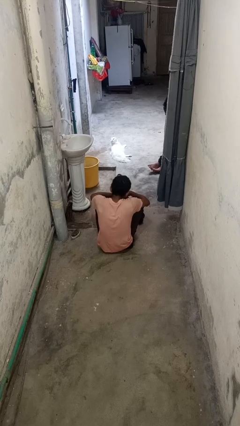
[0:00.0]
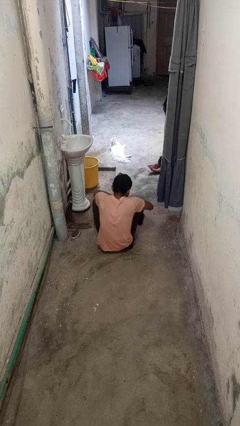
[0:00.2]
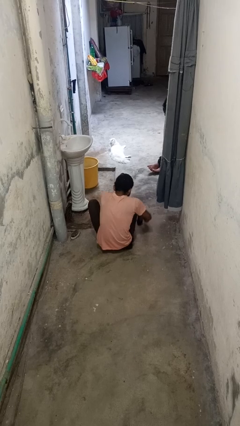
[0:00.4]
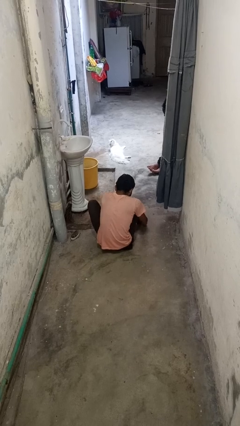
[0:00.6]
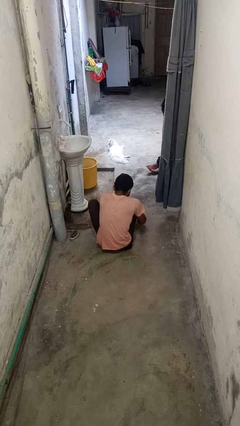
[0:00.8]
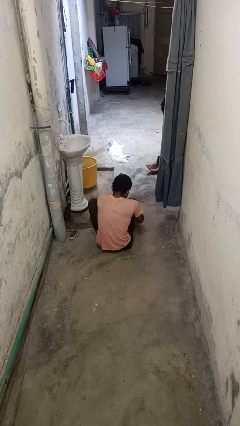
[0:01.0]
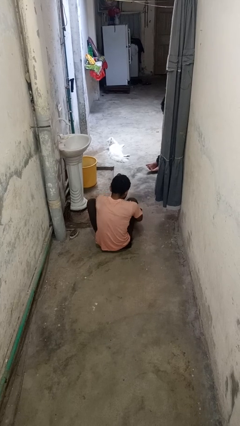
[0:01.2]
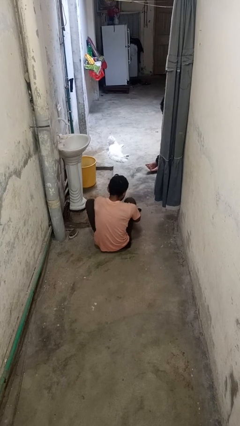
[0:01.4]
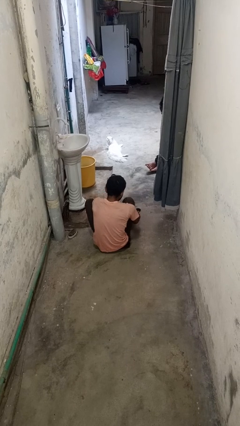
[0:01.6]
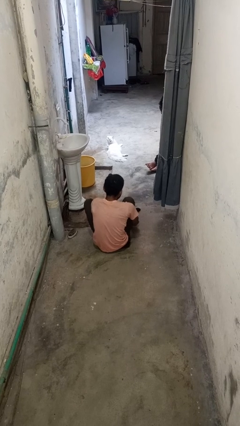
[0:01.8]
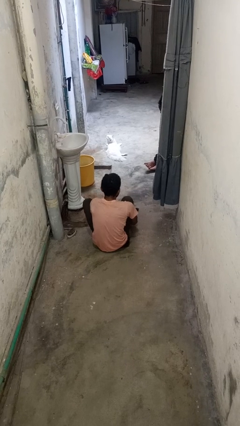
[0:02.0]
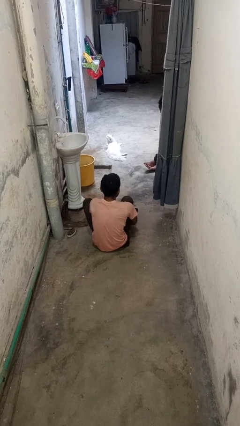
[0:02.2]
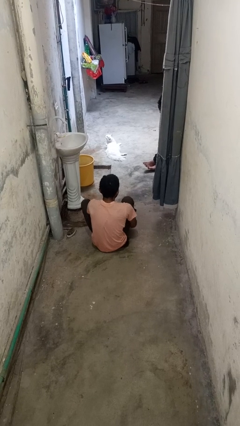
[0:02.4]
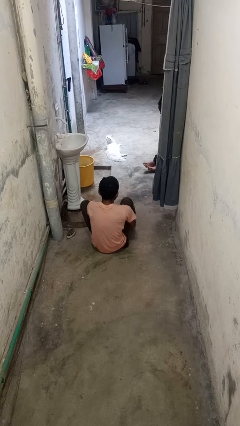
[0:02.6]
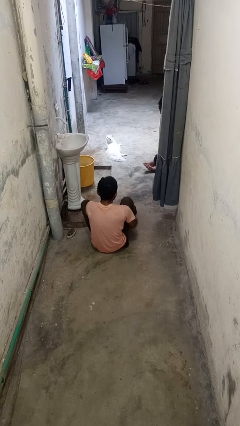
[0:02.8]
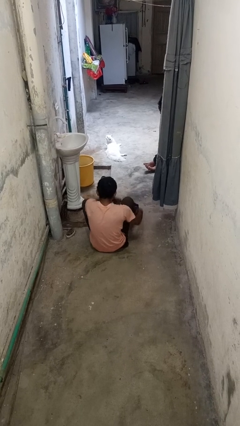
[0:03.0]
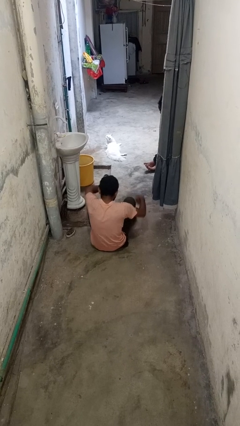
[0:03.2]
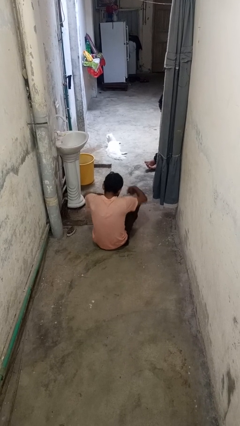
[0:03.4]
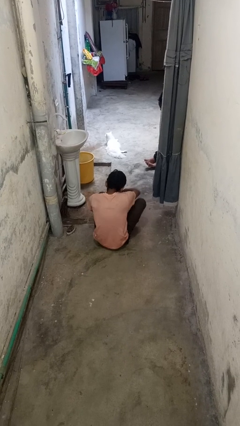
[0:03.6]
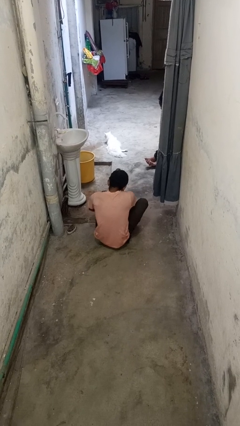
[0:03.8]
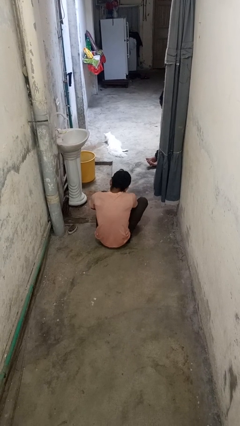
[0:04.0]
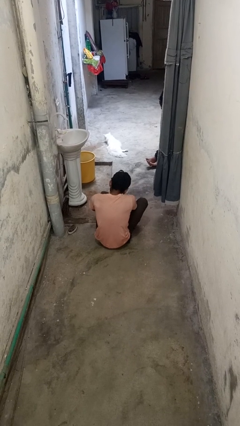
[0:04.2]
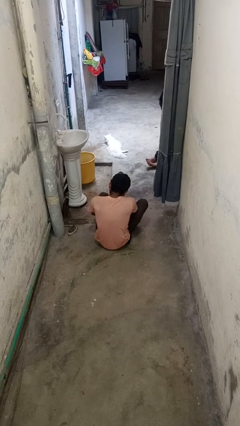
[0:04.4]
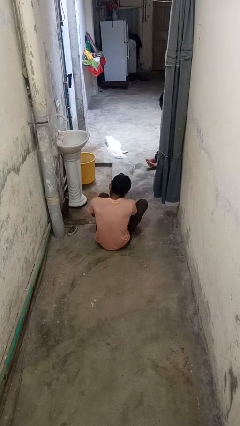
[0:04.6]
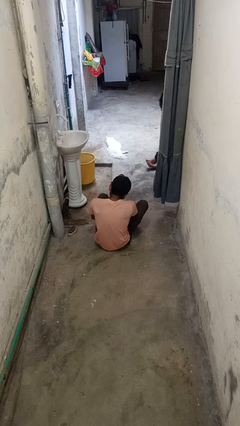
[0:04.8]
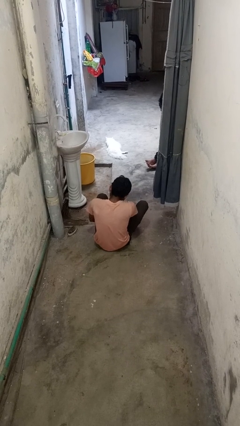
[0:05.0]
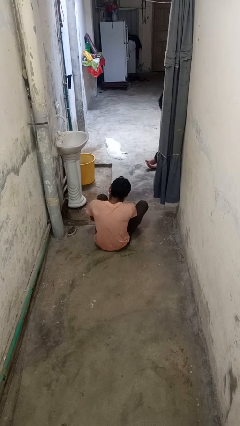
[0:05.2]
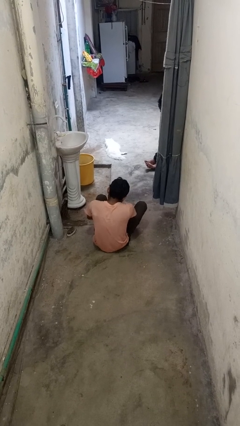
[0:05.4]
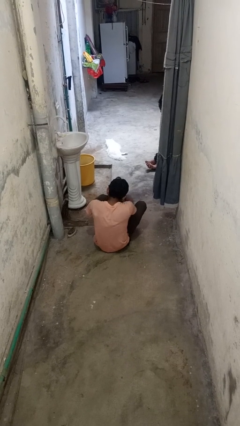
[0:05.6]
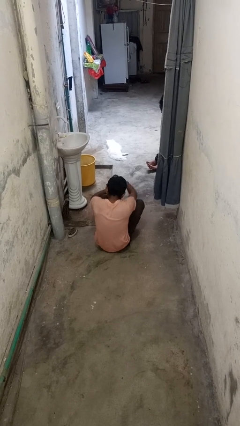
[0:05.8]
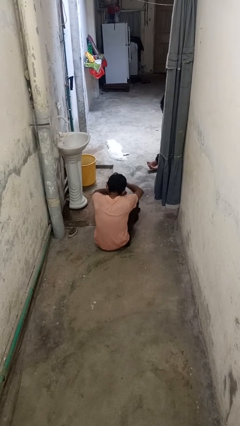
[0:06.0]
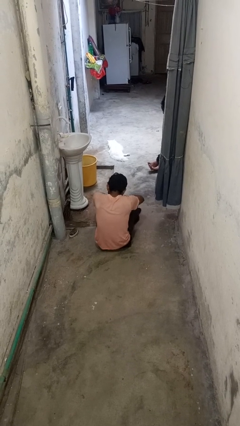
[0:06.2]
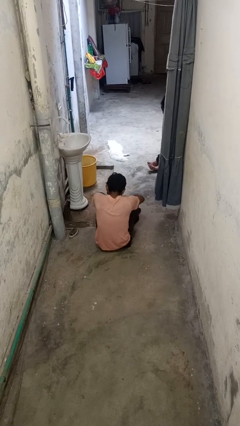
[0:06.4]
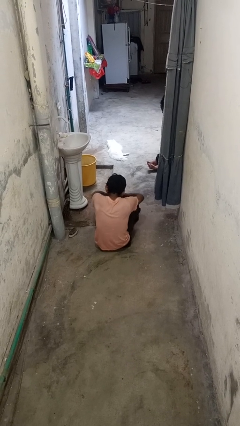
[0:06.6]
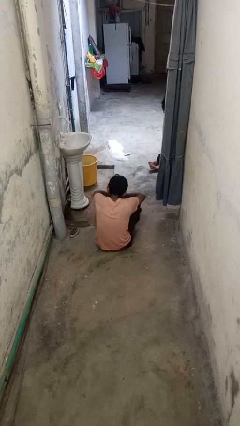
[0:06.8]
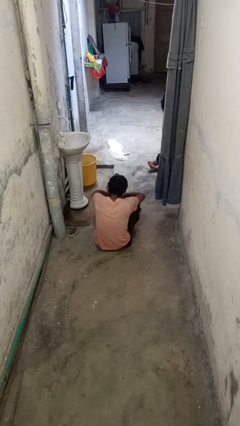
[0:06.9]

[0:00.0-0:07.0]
person puts on socks

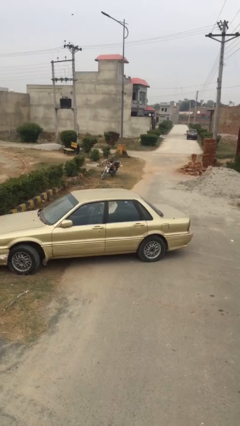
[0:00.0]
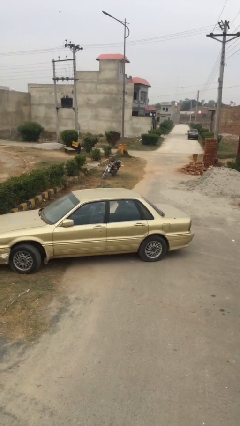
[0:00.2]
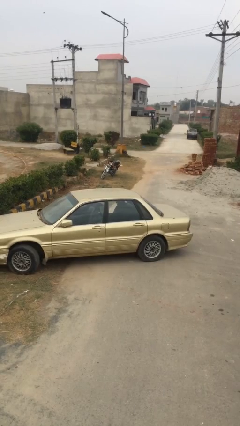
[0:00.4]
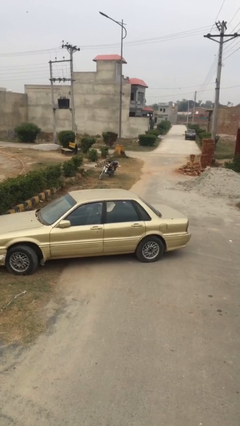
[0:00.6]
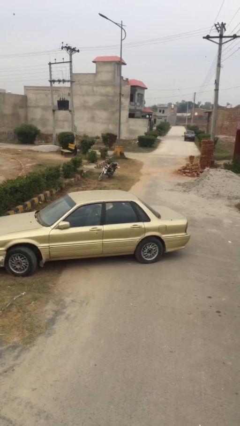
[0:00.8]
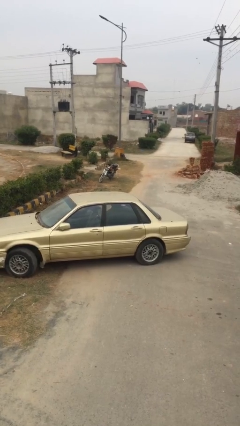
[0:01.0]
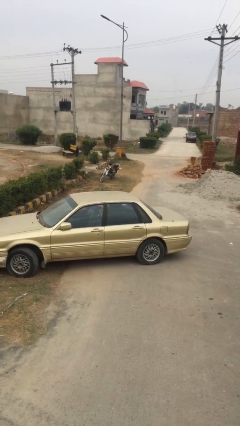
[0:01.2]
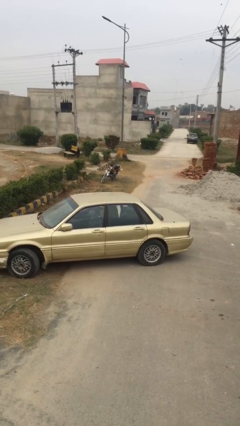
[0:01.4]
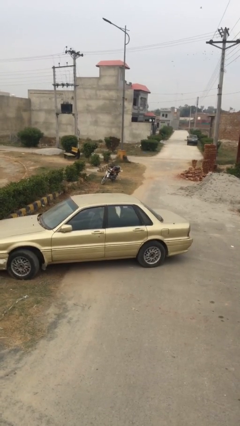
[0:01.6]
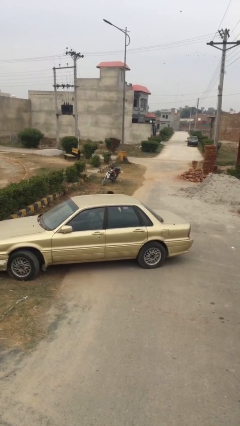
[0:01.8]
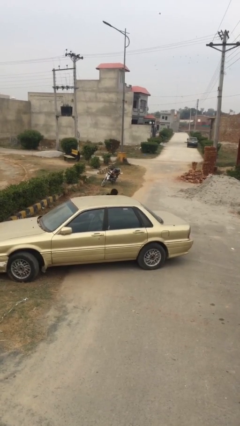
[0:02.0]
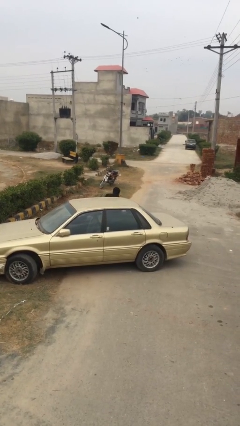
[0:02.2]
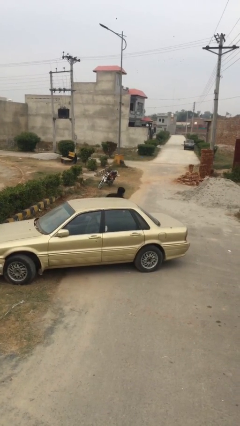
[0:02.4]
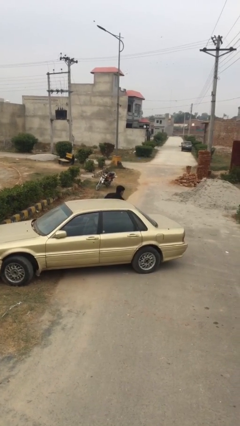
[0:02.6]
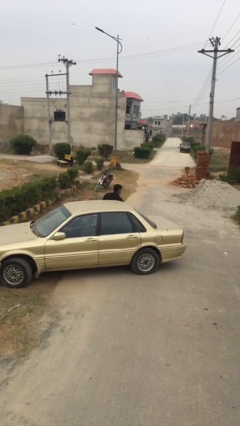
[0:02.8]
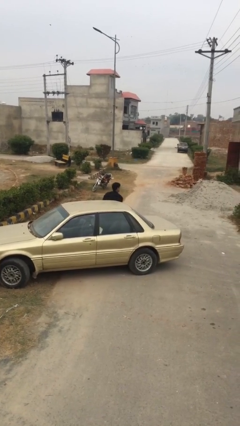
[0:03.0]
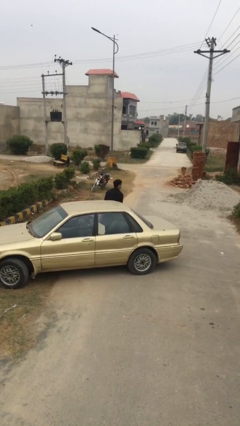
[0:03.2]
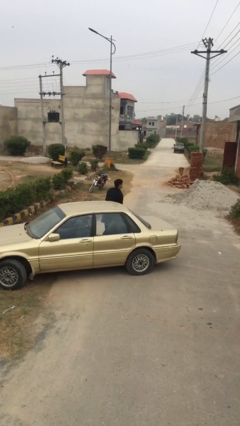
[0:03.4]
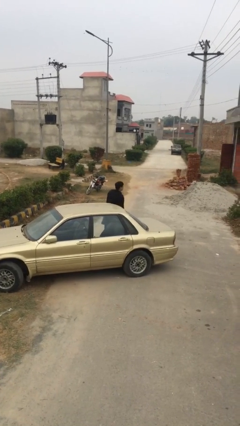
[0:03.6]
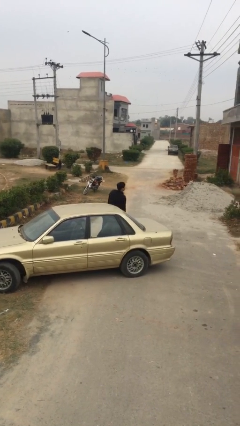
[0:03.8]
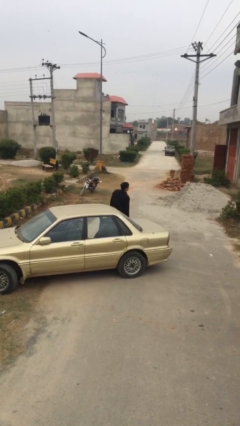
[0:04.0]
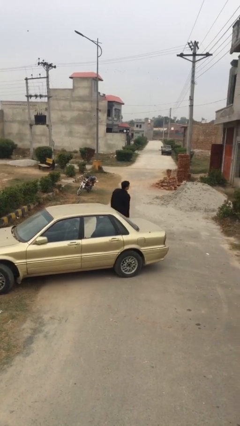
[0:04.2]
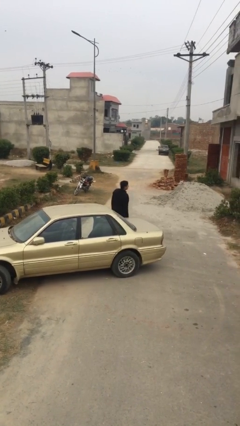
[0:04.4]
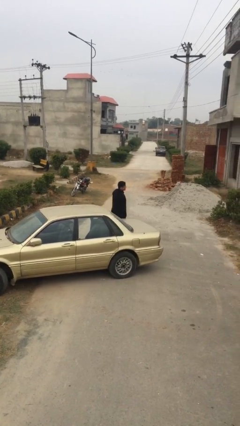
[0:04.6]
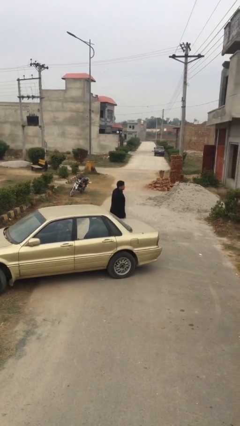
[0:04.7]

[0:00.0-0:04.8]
person exits car

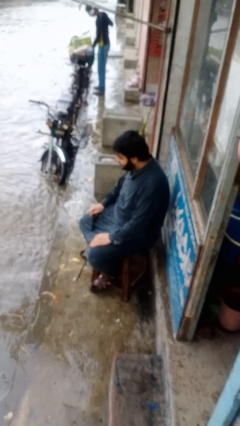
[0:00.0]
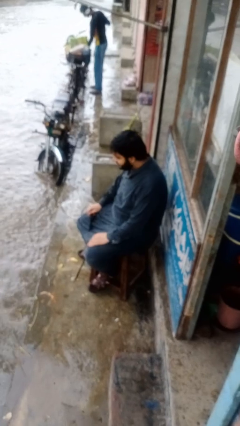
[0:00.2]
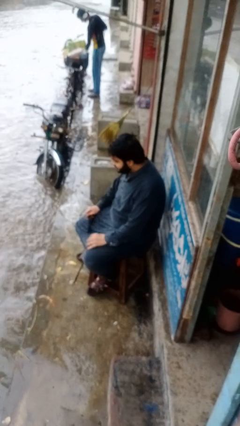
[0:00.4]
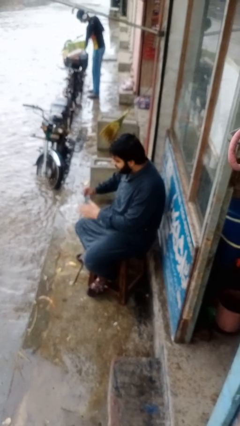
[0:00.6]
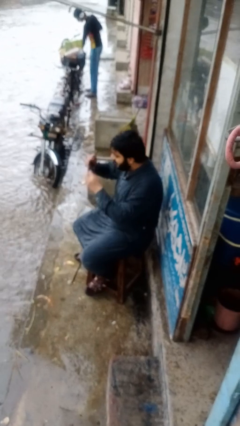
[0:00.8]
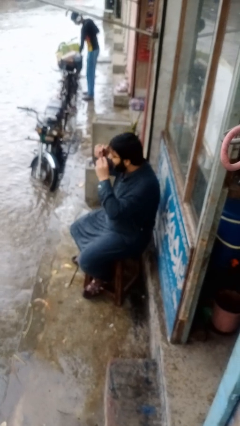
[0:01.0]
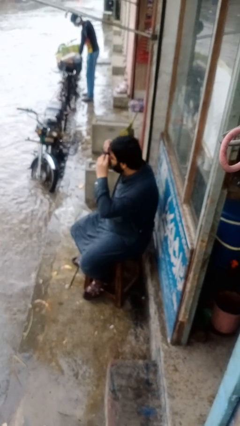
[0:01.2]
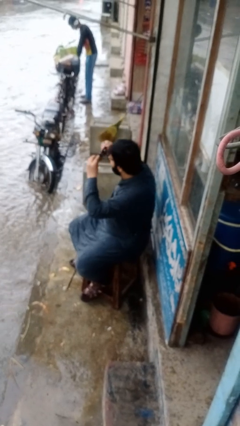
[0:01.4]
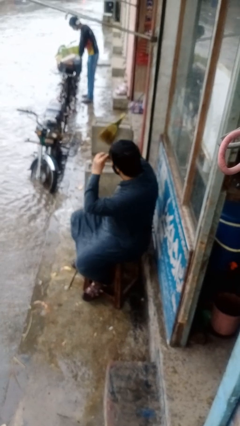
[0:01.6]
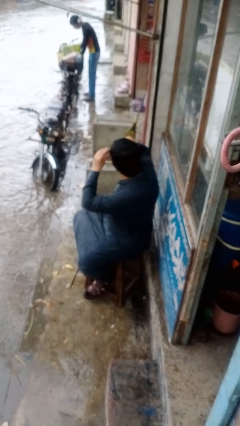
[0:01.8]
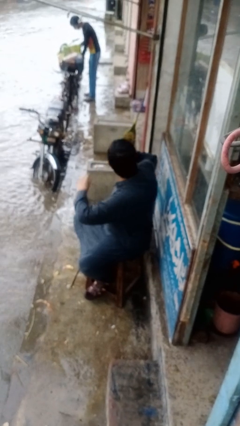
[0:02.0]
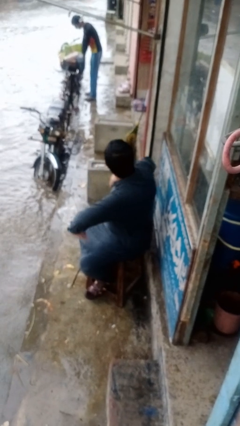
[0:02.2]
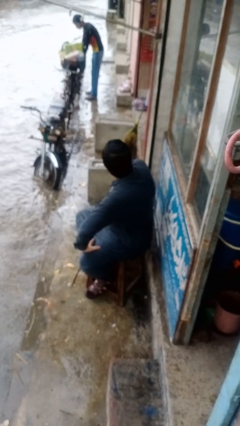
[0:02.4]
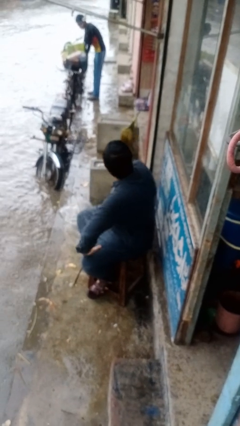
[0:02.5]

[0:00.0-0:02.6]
person puts on glasses

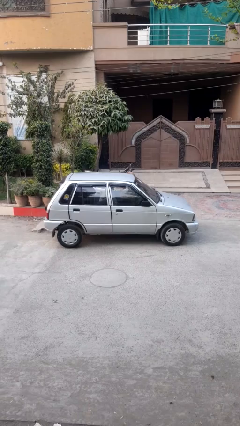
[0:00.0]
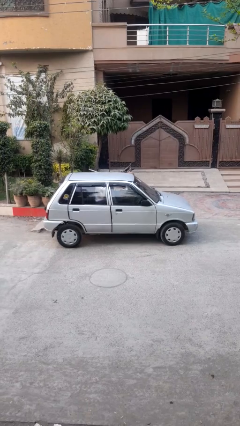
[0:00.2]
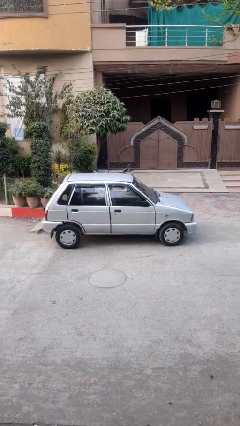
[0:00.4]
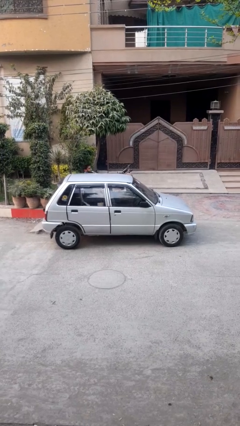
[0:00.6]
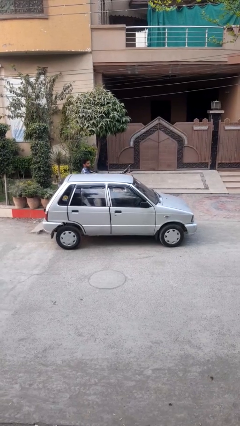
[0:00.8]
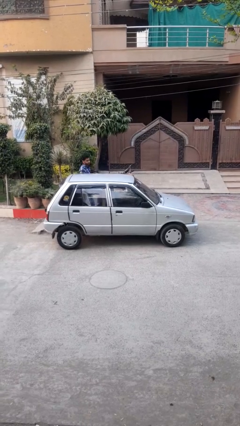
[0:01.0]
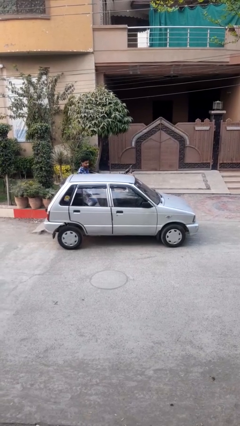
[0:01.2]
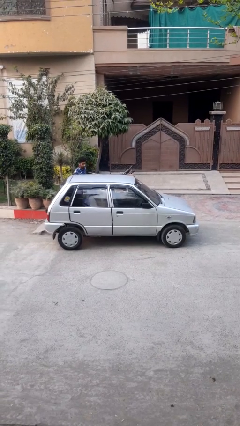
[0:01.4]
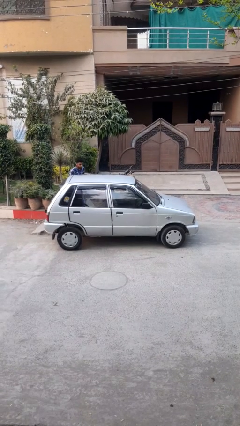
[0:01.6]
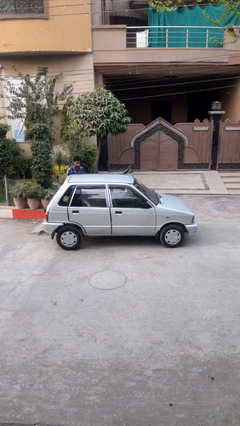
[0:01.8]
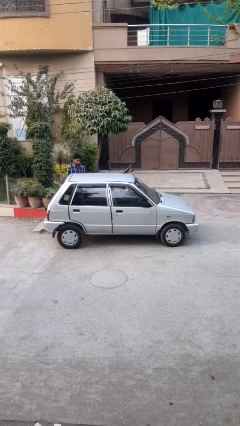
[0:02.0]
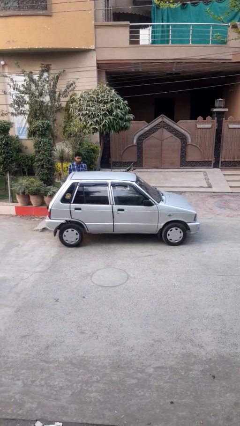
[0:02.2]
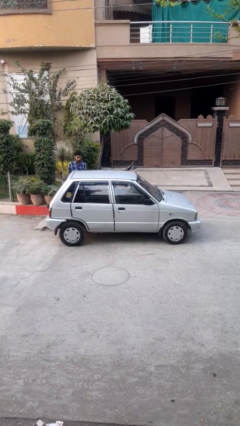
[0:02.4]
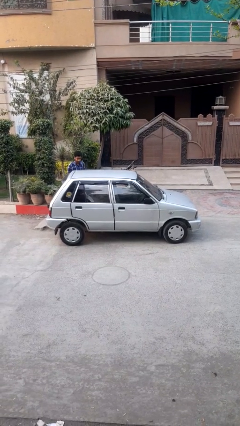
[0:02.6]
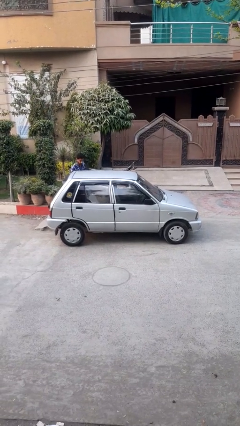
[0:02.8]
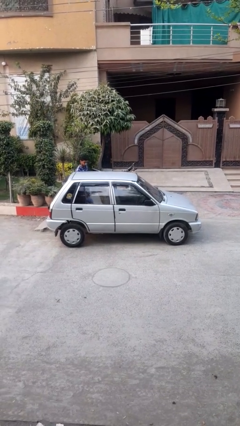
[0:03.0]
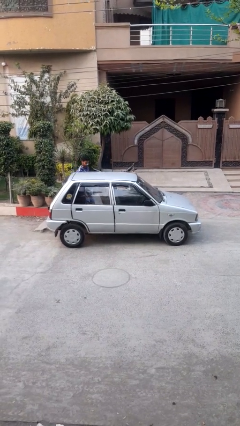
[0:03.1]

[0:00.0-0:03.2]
car drops off person

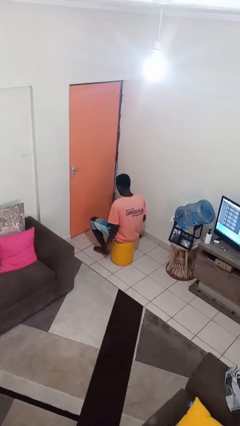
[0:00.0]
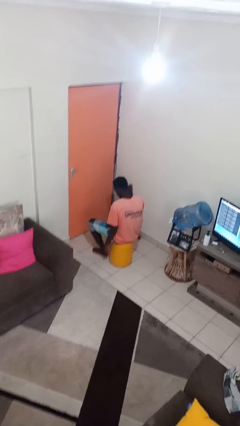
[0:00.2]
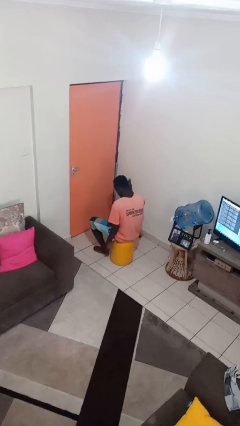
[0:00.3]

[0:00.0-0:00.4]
person brushes hair
